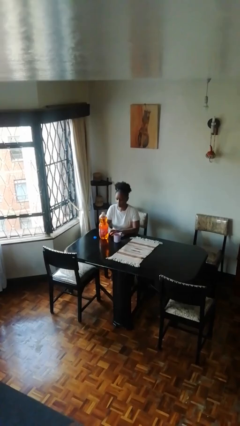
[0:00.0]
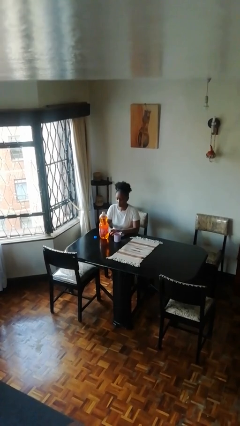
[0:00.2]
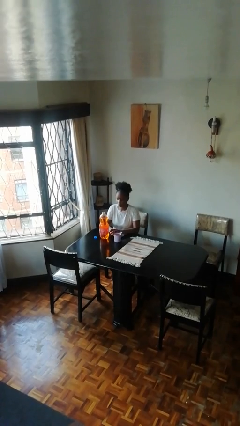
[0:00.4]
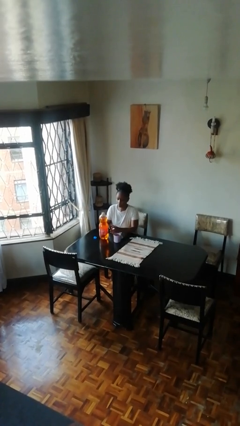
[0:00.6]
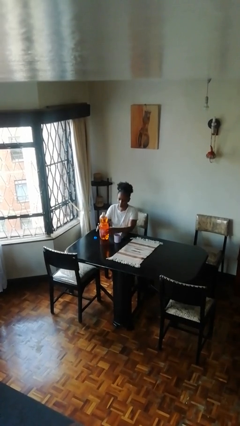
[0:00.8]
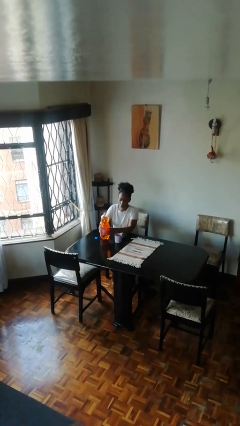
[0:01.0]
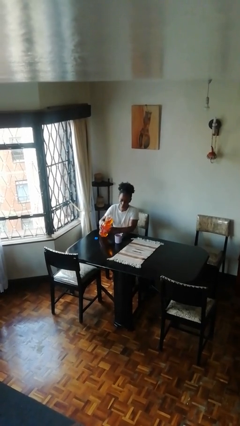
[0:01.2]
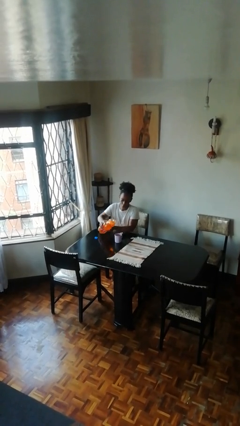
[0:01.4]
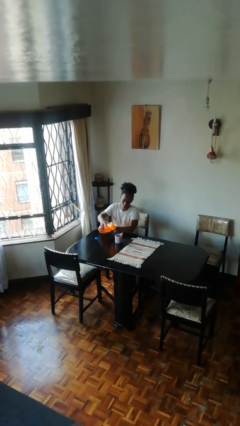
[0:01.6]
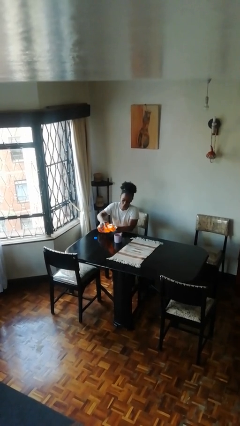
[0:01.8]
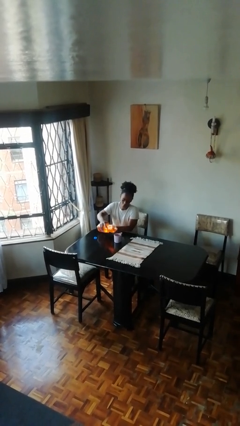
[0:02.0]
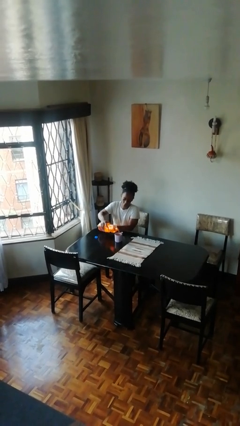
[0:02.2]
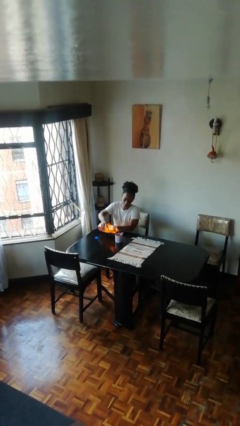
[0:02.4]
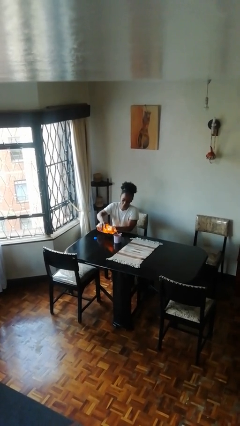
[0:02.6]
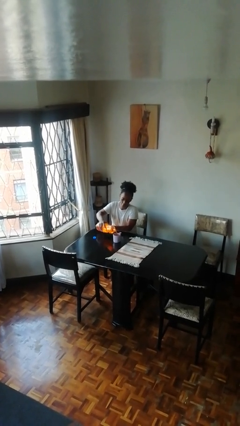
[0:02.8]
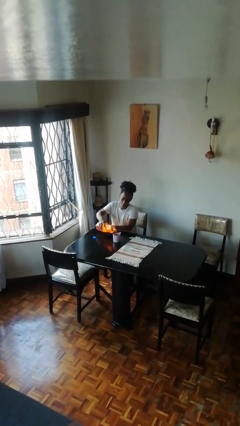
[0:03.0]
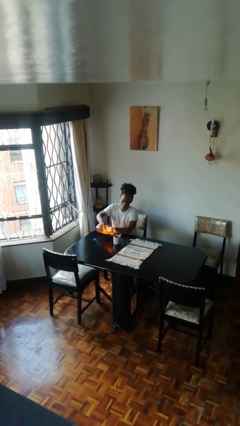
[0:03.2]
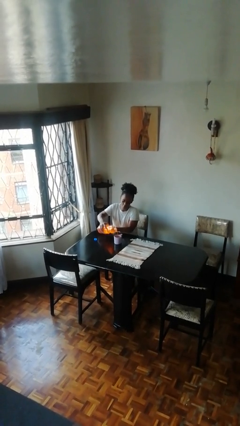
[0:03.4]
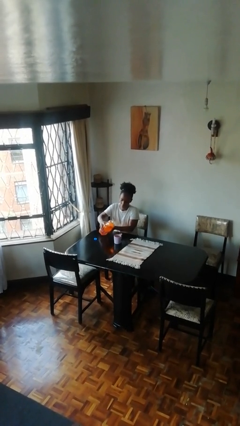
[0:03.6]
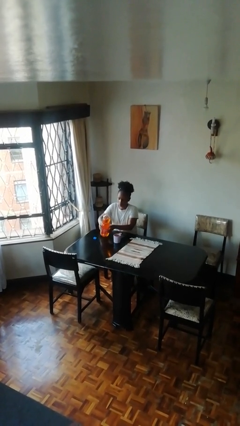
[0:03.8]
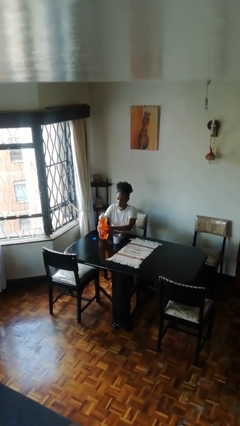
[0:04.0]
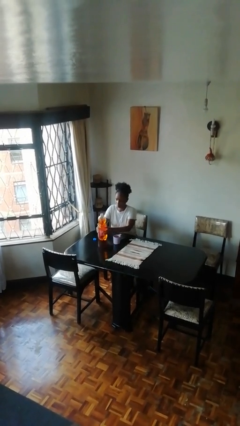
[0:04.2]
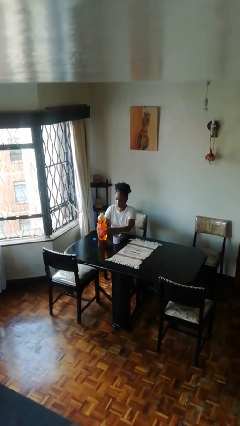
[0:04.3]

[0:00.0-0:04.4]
person pours liquid into cup

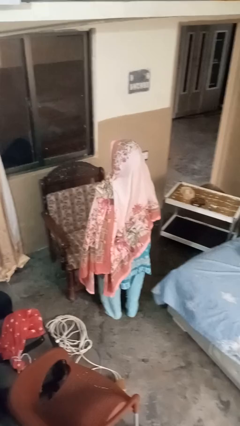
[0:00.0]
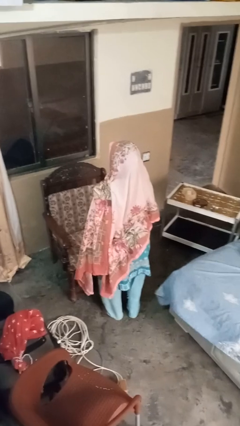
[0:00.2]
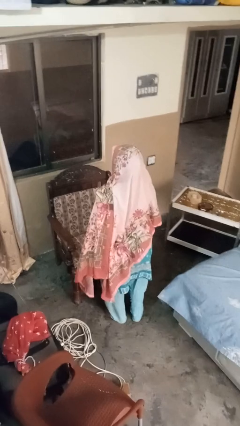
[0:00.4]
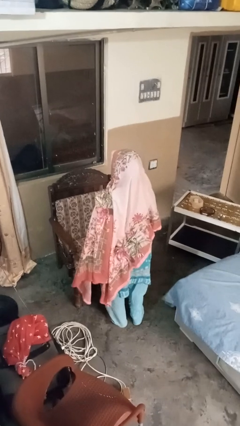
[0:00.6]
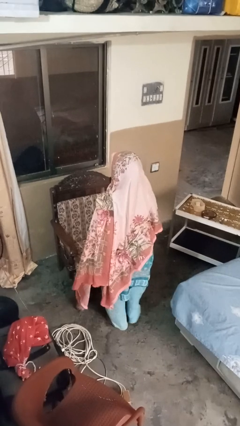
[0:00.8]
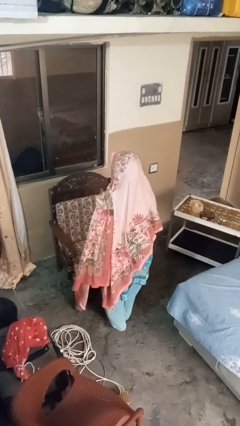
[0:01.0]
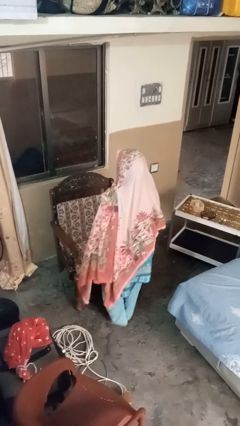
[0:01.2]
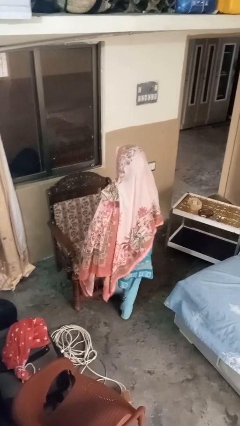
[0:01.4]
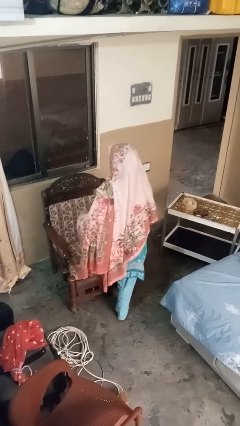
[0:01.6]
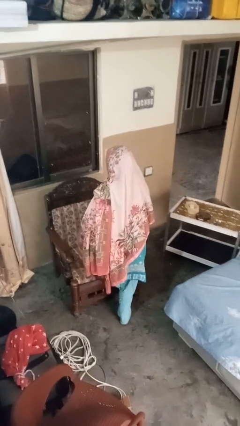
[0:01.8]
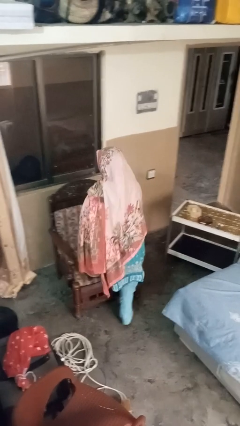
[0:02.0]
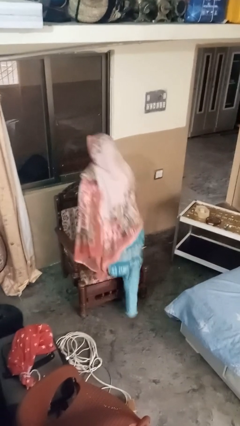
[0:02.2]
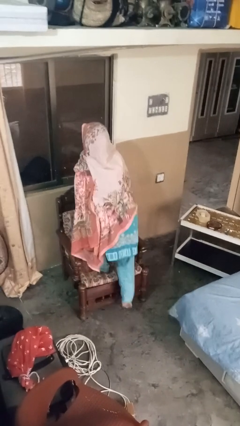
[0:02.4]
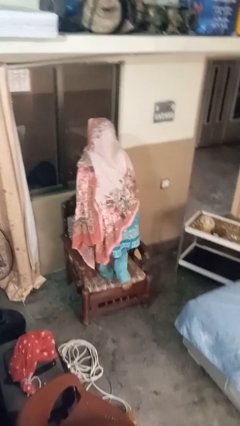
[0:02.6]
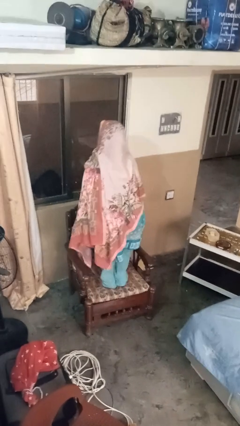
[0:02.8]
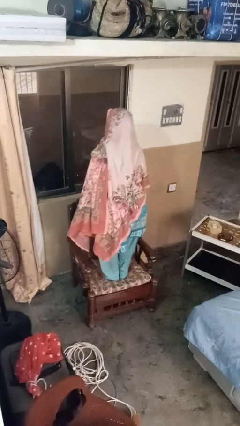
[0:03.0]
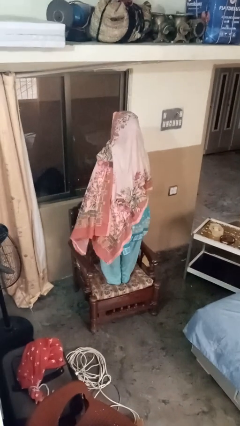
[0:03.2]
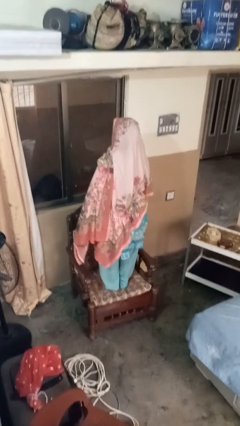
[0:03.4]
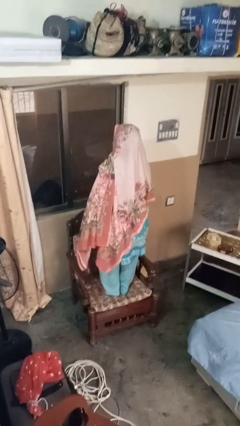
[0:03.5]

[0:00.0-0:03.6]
person climbs on couch

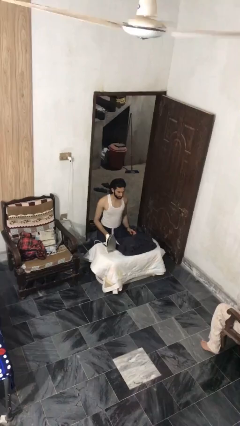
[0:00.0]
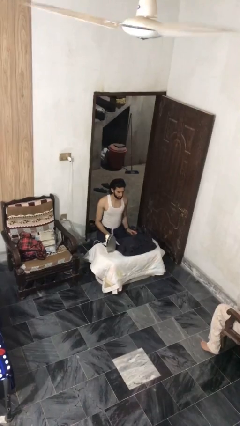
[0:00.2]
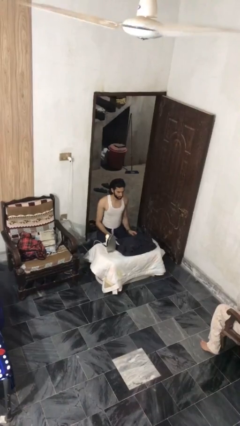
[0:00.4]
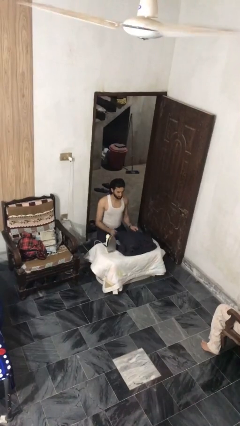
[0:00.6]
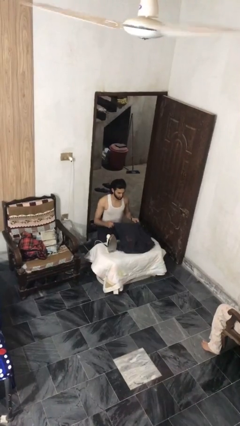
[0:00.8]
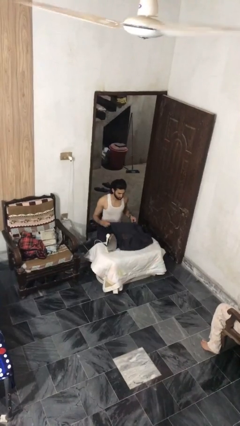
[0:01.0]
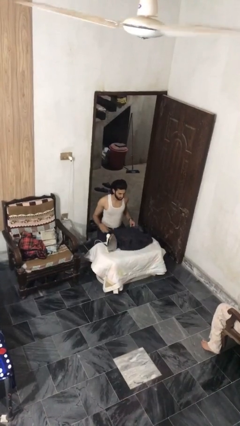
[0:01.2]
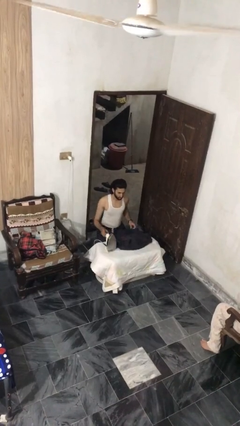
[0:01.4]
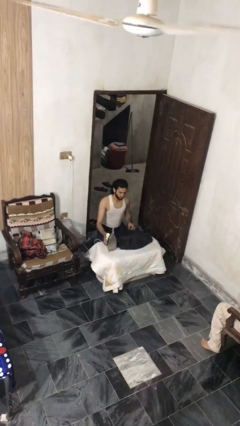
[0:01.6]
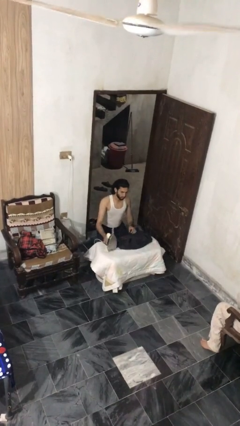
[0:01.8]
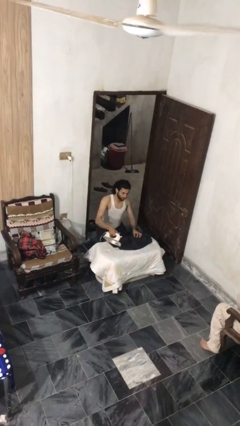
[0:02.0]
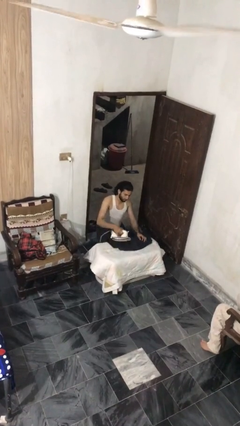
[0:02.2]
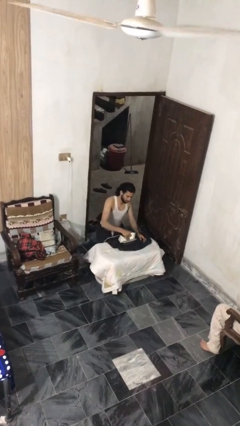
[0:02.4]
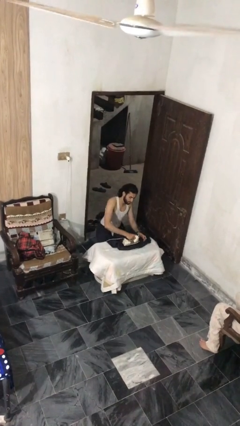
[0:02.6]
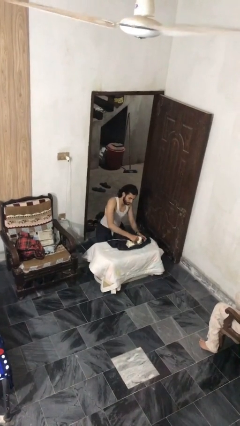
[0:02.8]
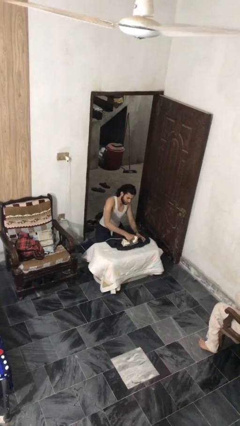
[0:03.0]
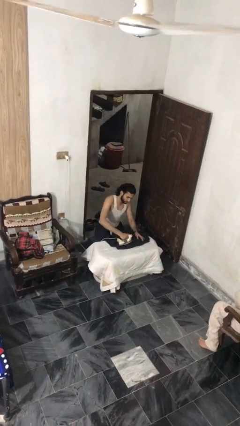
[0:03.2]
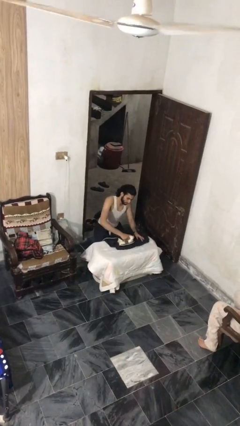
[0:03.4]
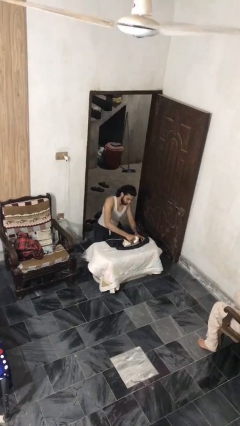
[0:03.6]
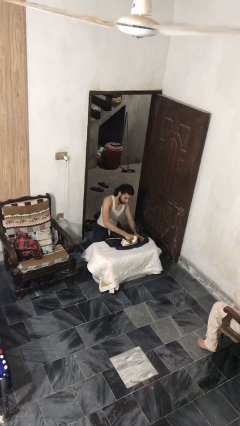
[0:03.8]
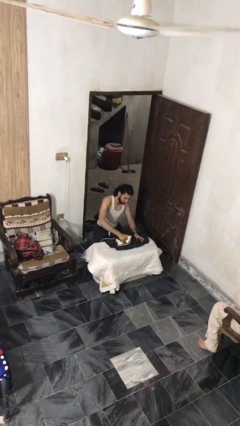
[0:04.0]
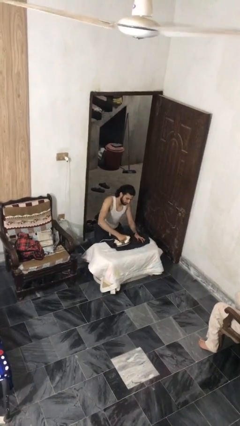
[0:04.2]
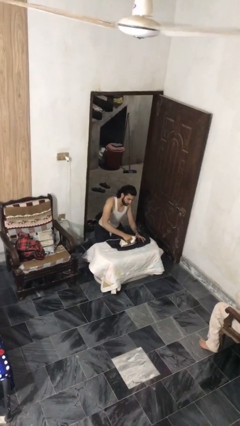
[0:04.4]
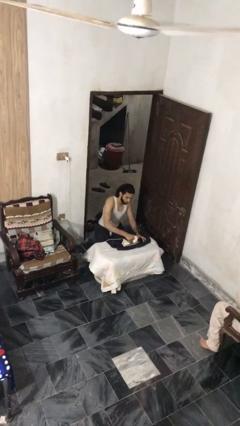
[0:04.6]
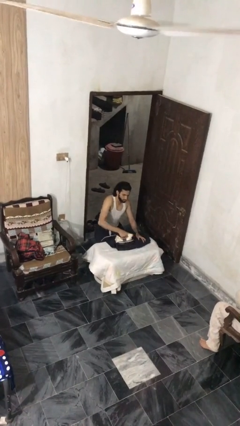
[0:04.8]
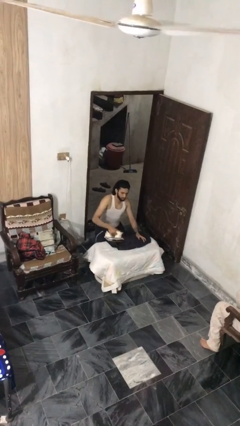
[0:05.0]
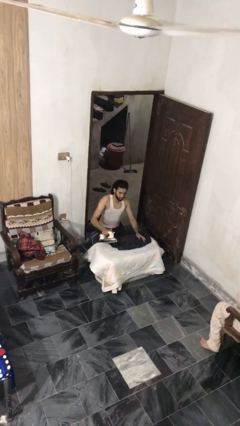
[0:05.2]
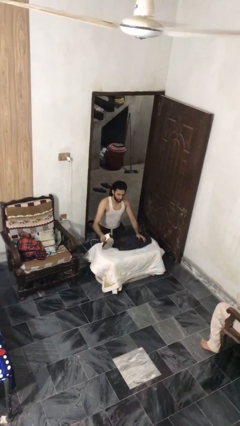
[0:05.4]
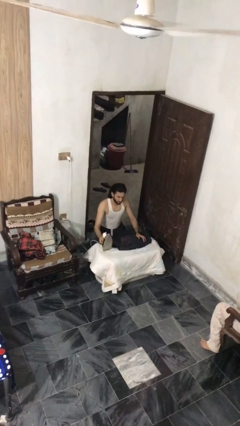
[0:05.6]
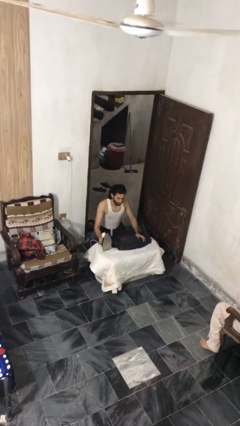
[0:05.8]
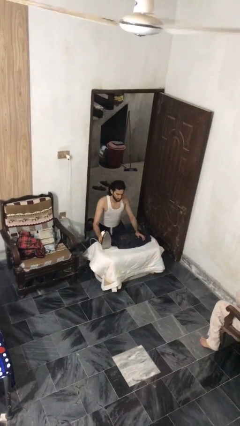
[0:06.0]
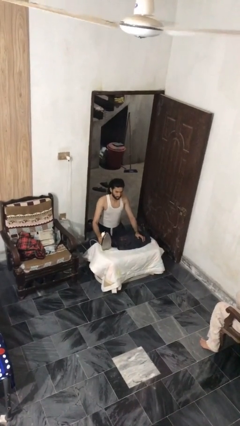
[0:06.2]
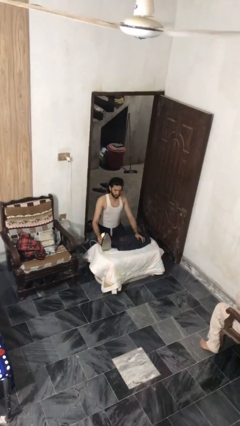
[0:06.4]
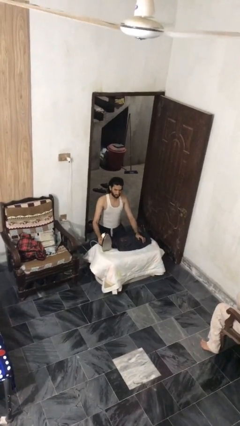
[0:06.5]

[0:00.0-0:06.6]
person irons clothes

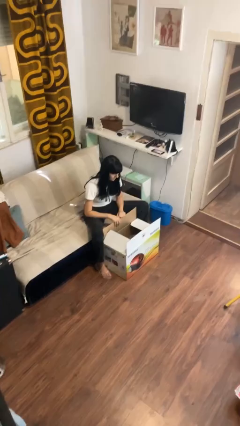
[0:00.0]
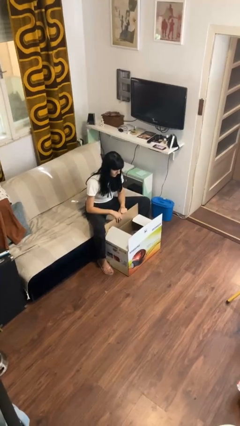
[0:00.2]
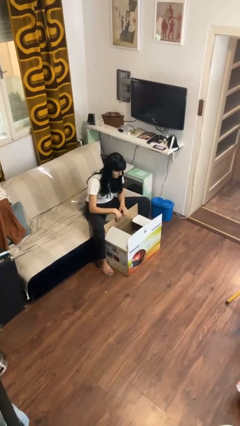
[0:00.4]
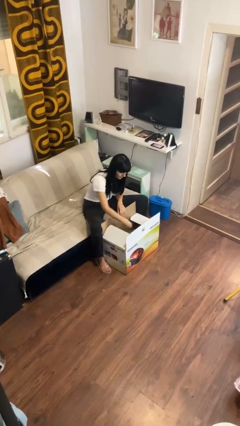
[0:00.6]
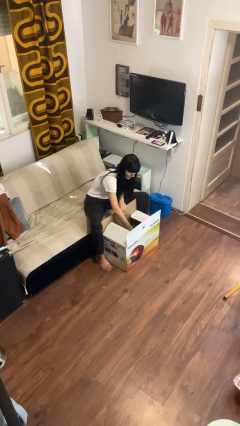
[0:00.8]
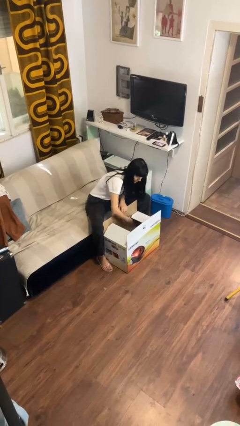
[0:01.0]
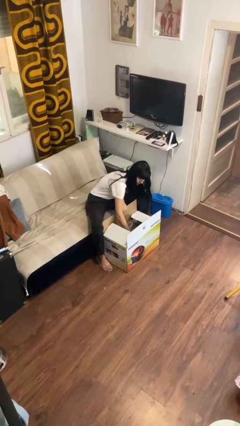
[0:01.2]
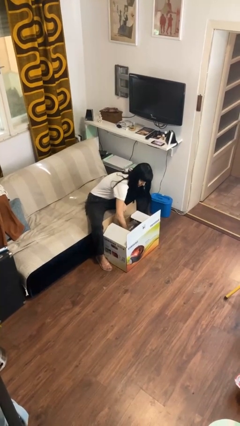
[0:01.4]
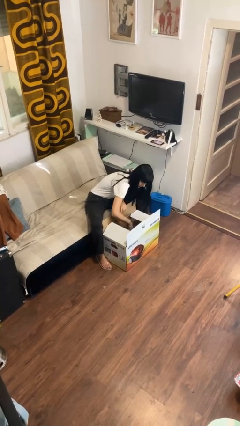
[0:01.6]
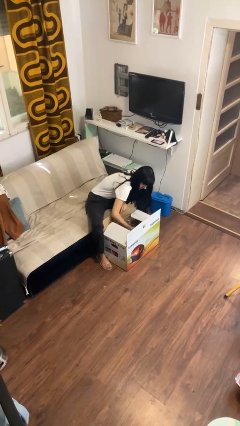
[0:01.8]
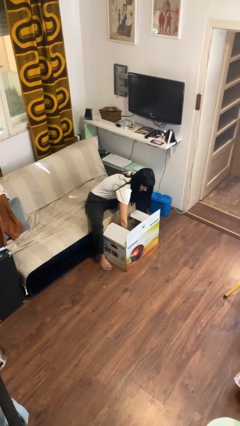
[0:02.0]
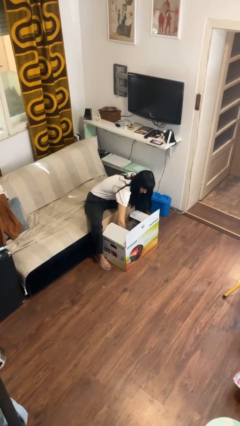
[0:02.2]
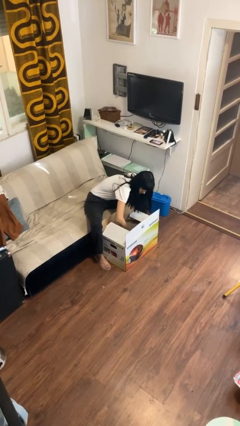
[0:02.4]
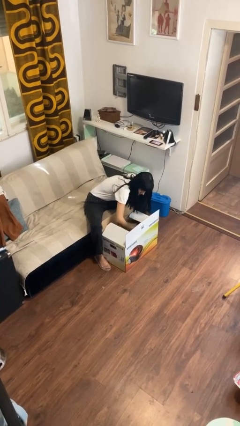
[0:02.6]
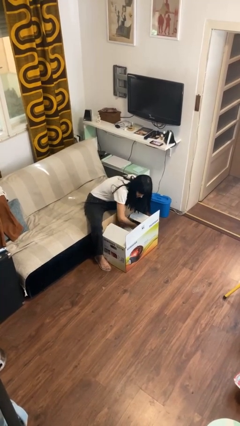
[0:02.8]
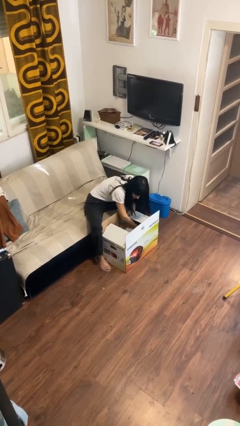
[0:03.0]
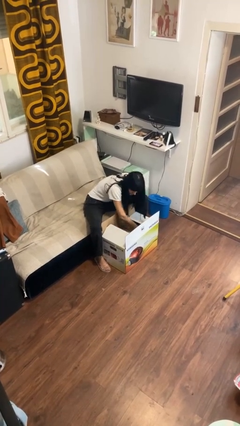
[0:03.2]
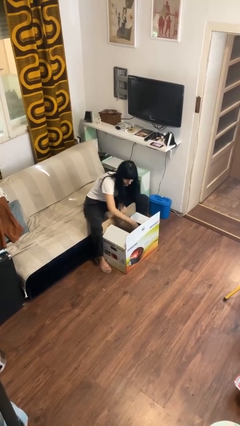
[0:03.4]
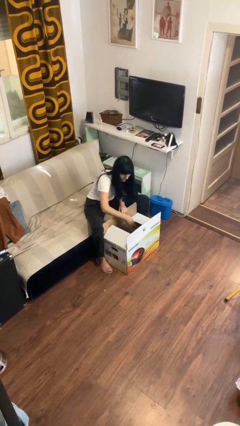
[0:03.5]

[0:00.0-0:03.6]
person searches in box
